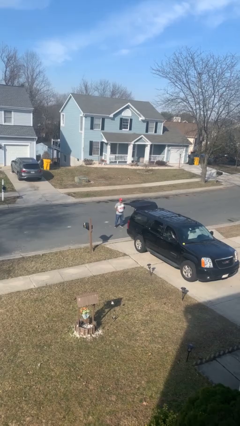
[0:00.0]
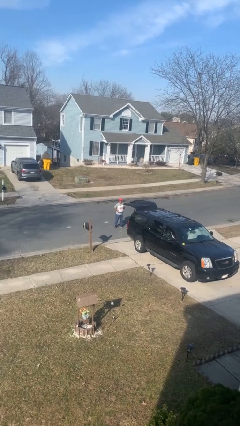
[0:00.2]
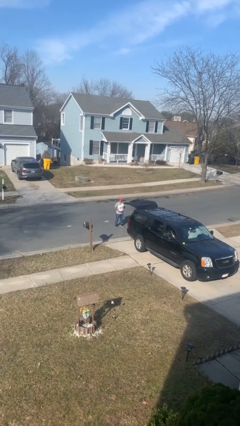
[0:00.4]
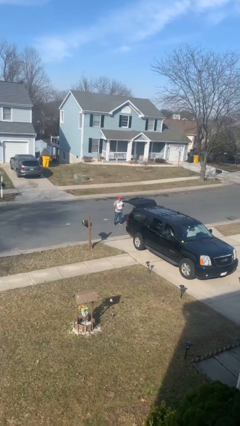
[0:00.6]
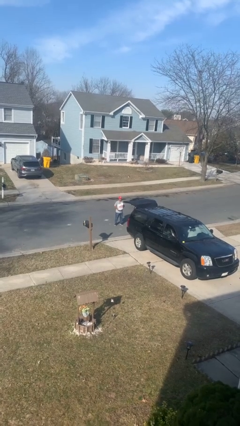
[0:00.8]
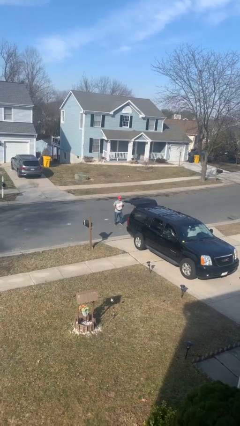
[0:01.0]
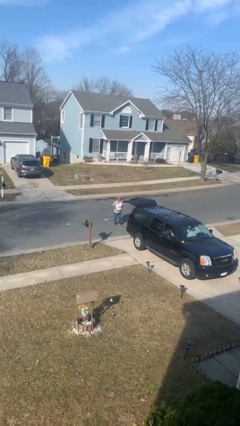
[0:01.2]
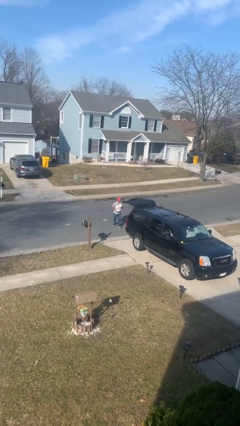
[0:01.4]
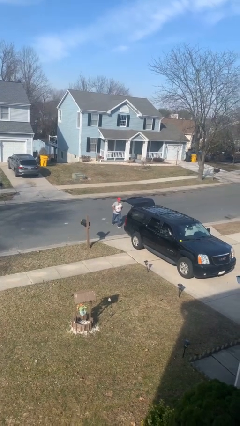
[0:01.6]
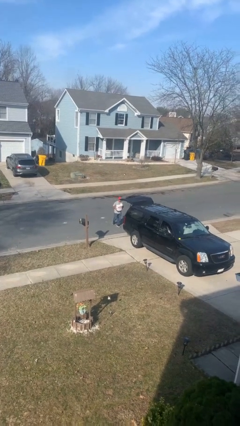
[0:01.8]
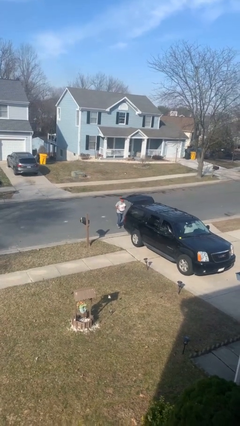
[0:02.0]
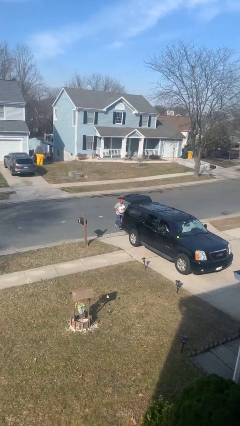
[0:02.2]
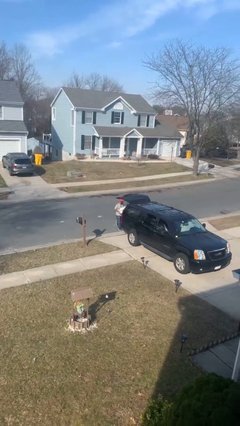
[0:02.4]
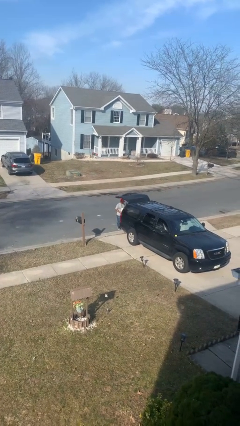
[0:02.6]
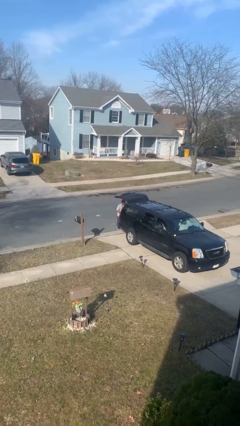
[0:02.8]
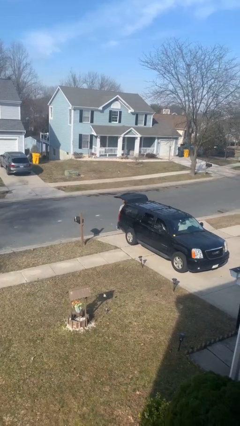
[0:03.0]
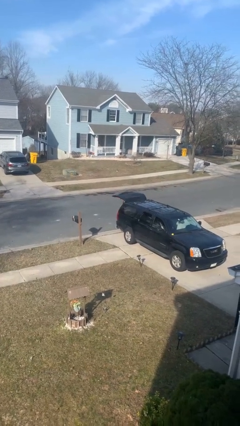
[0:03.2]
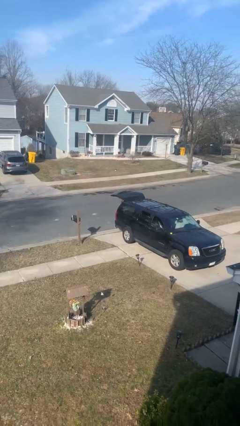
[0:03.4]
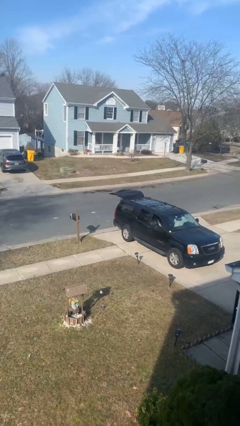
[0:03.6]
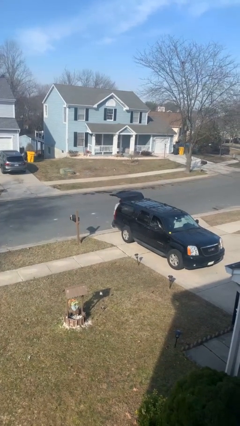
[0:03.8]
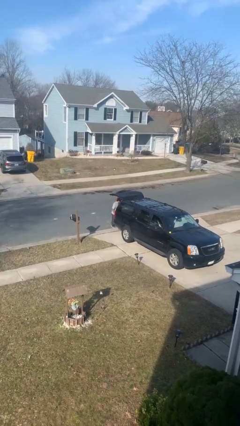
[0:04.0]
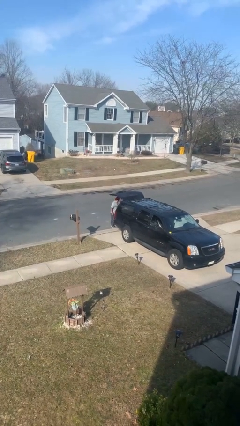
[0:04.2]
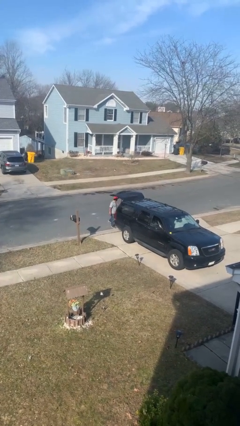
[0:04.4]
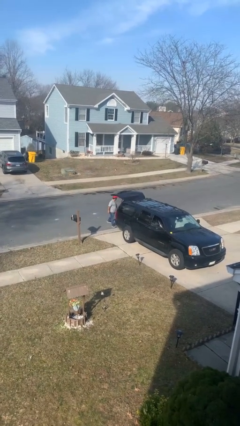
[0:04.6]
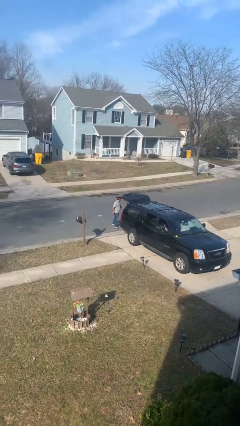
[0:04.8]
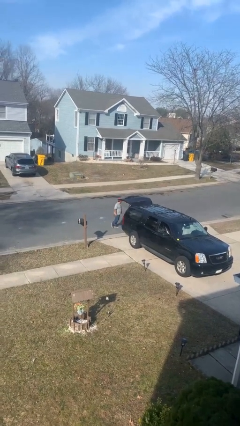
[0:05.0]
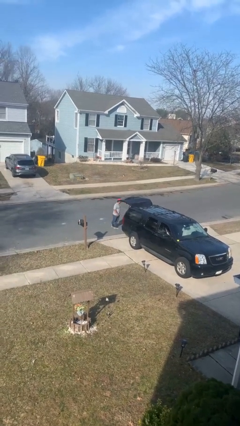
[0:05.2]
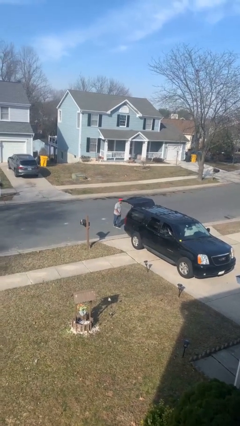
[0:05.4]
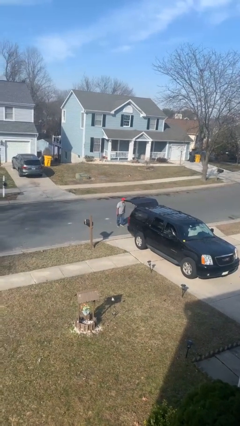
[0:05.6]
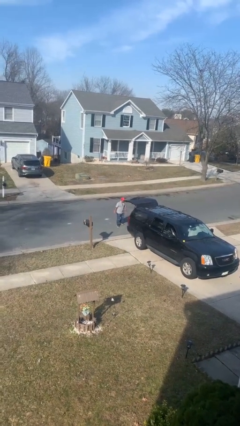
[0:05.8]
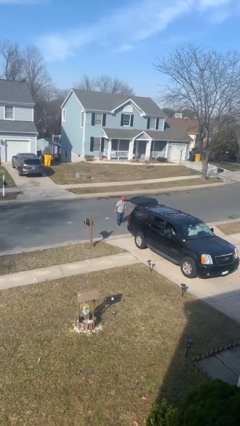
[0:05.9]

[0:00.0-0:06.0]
person loads car

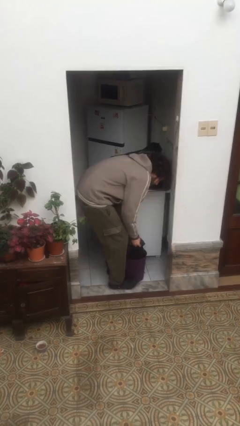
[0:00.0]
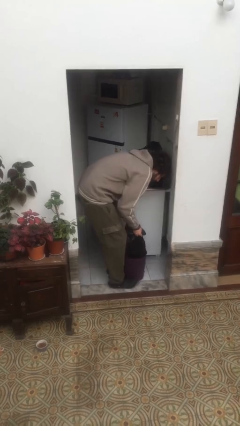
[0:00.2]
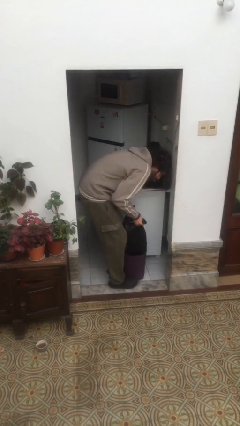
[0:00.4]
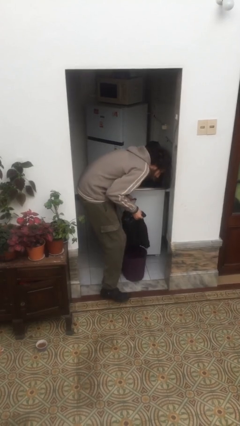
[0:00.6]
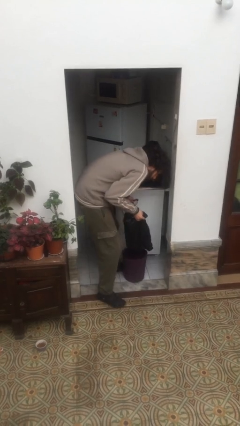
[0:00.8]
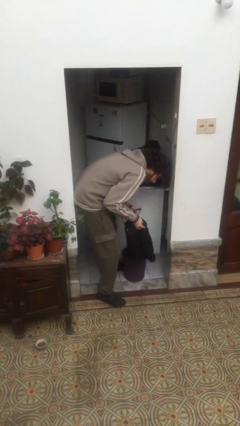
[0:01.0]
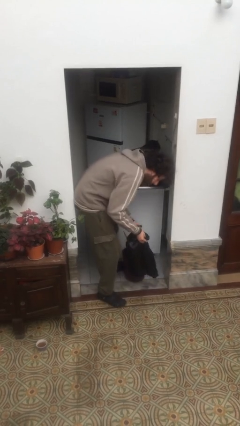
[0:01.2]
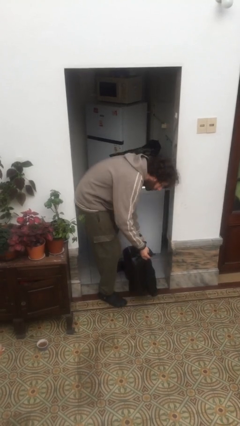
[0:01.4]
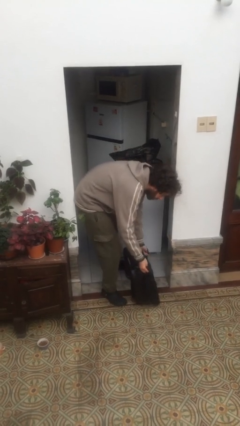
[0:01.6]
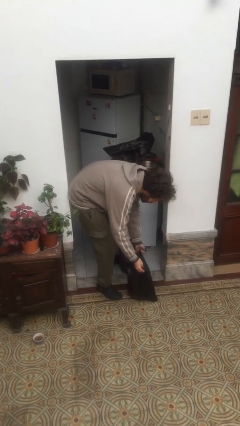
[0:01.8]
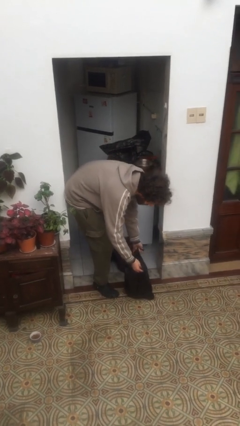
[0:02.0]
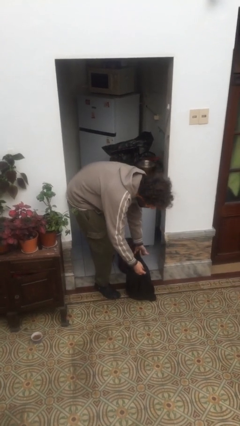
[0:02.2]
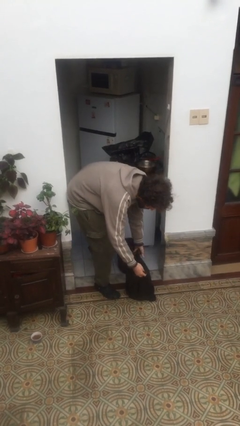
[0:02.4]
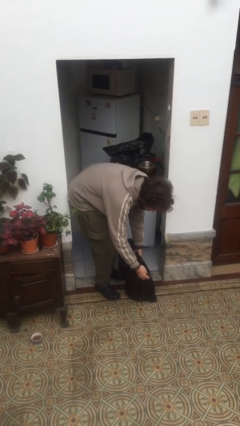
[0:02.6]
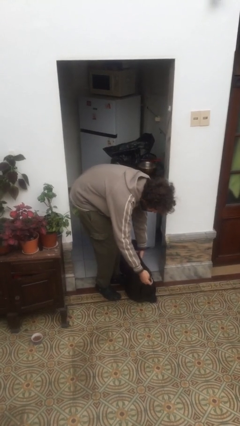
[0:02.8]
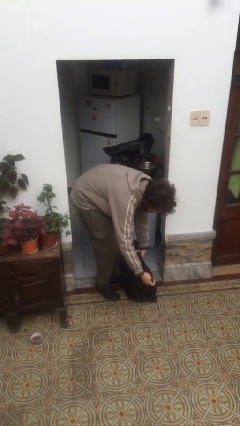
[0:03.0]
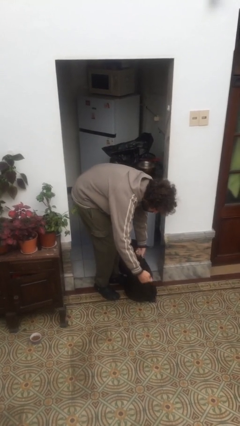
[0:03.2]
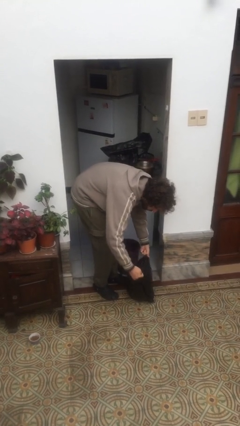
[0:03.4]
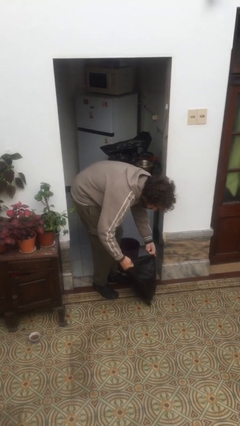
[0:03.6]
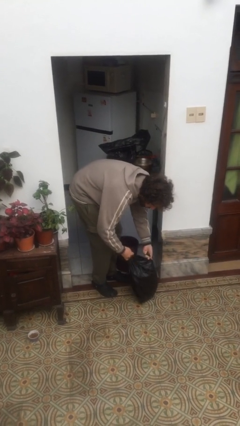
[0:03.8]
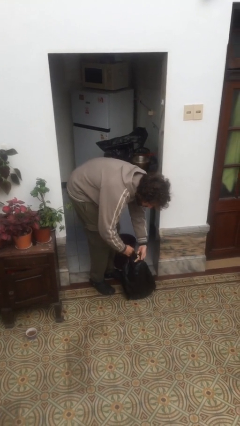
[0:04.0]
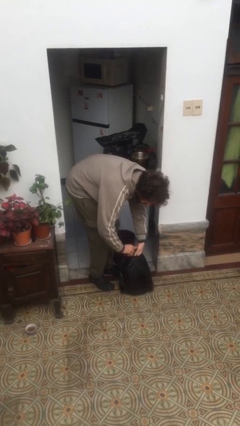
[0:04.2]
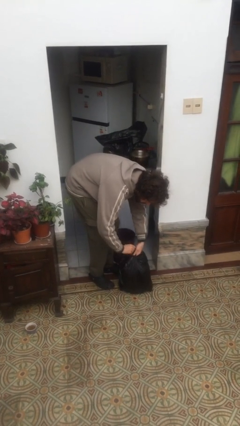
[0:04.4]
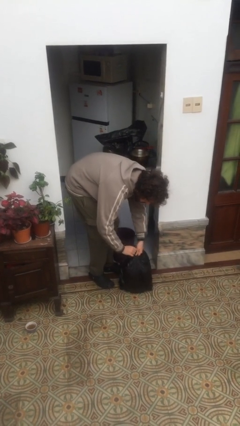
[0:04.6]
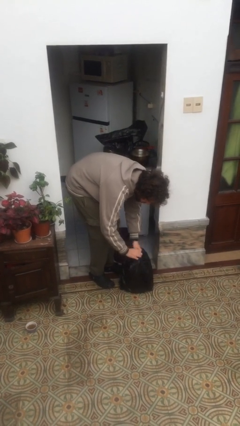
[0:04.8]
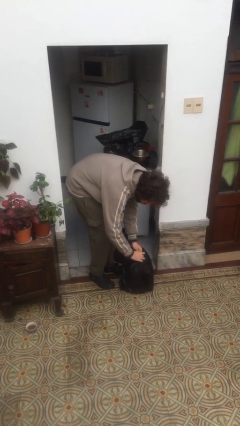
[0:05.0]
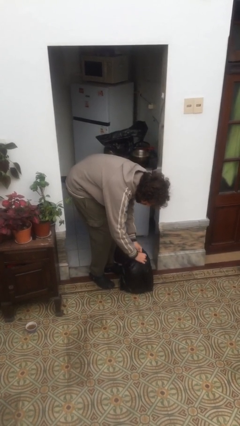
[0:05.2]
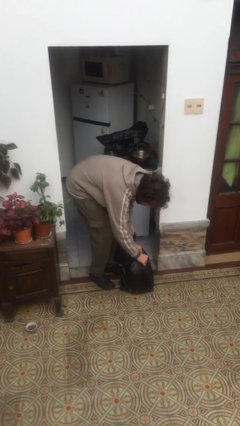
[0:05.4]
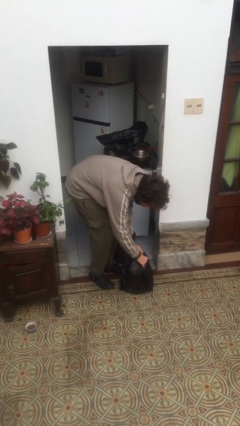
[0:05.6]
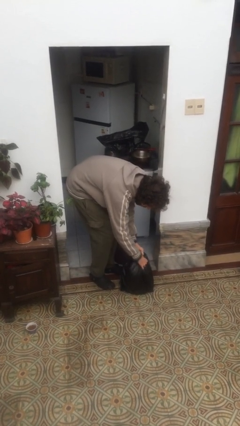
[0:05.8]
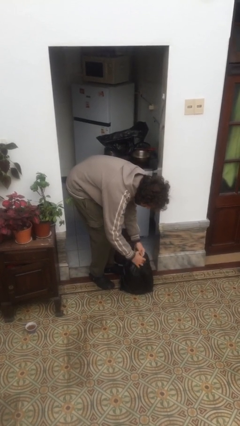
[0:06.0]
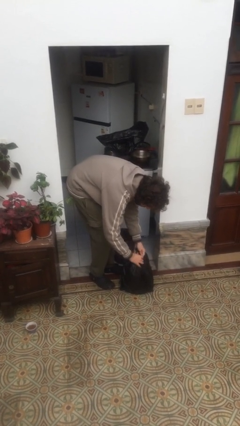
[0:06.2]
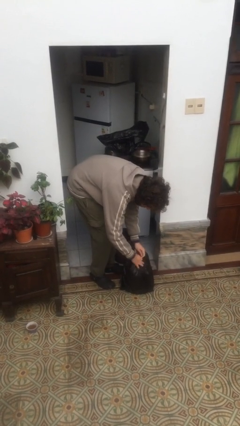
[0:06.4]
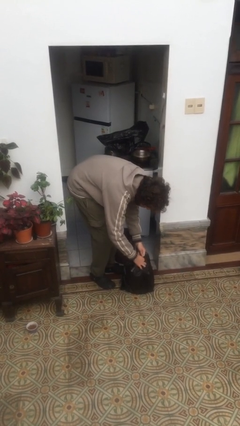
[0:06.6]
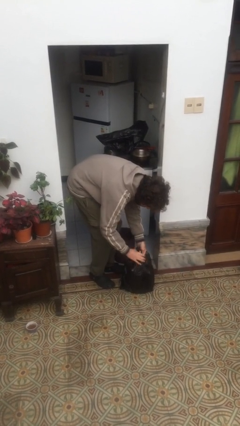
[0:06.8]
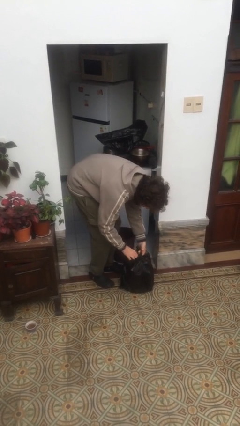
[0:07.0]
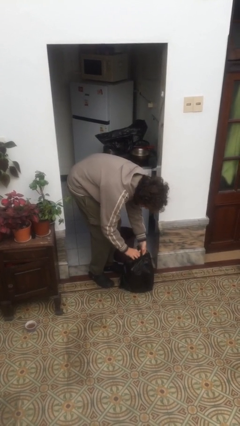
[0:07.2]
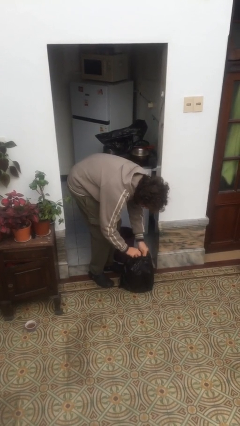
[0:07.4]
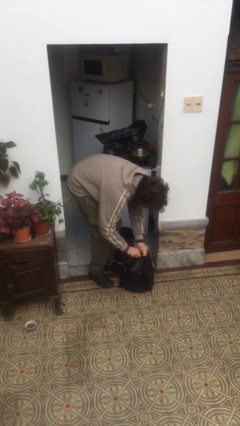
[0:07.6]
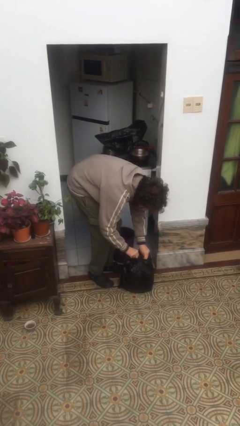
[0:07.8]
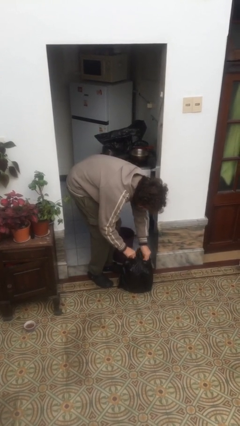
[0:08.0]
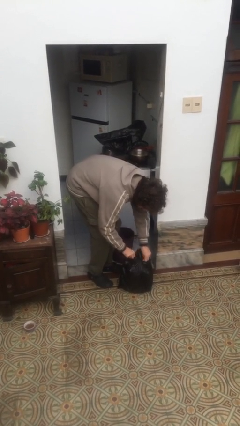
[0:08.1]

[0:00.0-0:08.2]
person removes trashbag from trashcan

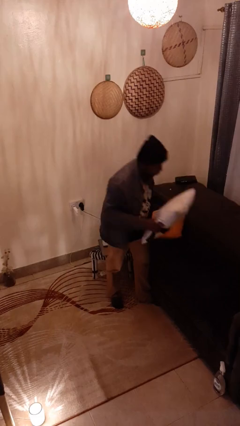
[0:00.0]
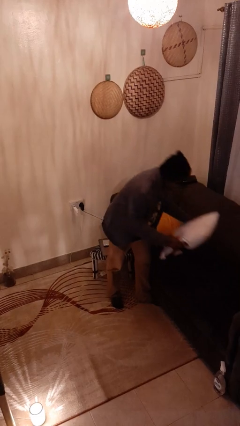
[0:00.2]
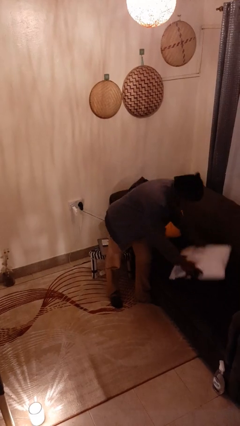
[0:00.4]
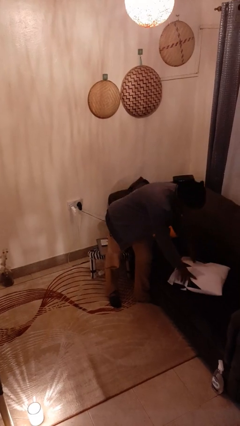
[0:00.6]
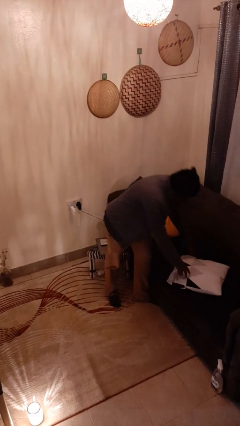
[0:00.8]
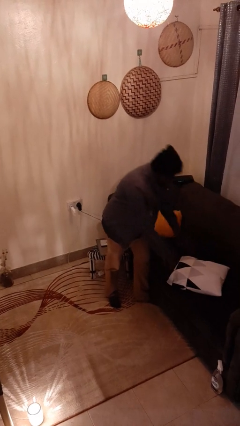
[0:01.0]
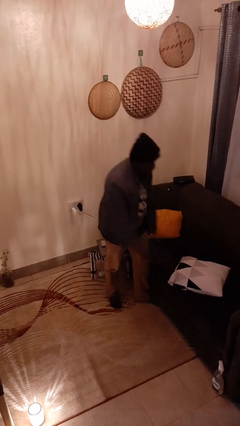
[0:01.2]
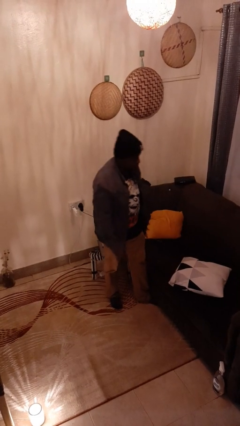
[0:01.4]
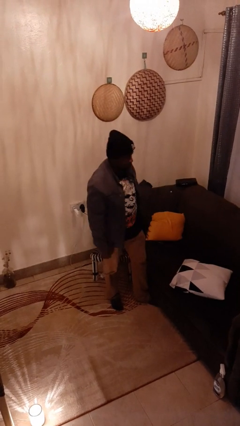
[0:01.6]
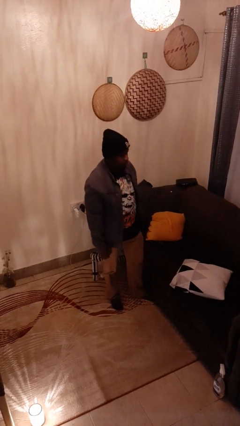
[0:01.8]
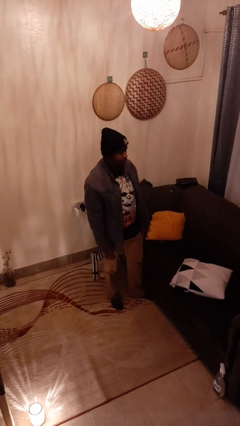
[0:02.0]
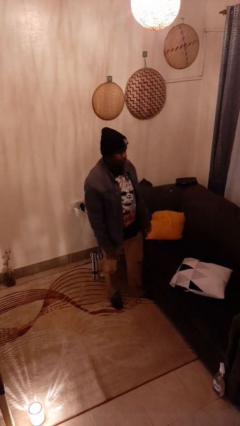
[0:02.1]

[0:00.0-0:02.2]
person puts down object on couch

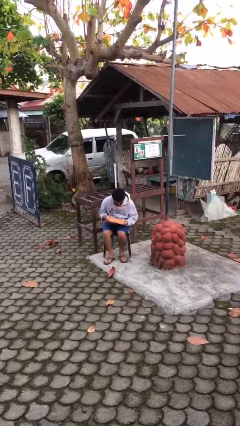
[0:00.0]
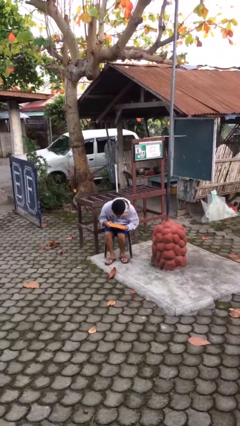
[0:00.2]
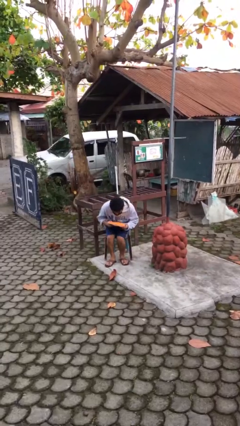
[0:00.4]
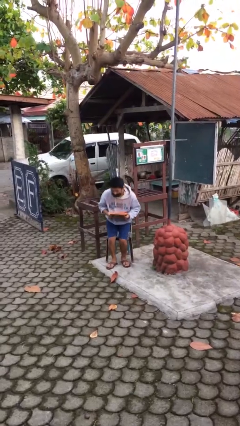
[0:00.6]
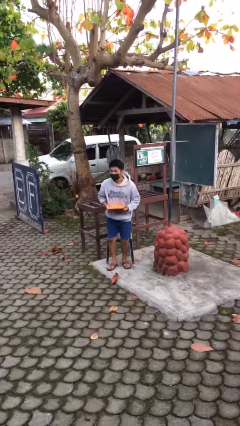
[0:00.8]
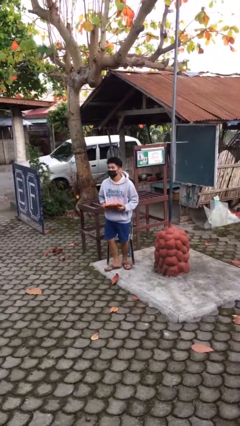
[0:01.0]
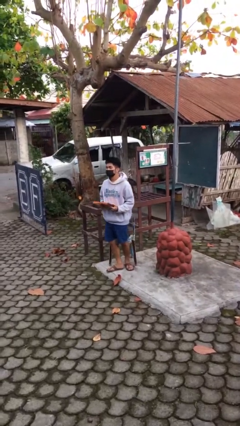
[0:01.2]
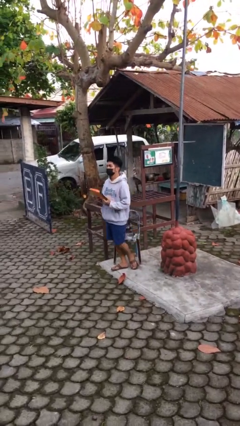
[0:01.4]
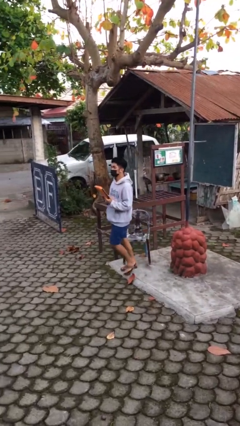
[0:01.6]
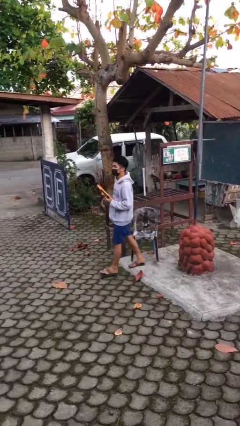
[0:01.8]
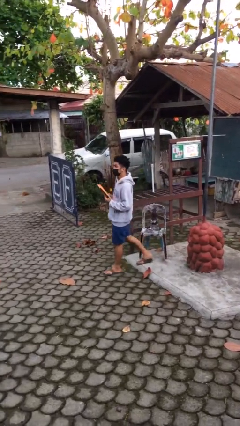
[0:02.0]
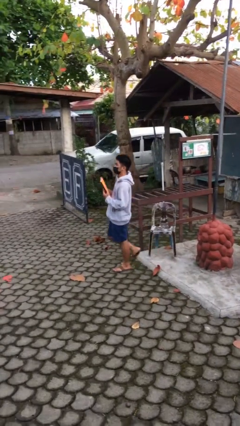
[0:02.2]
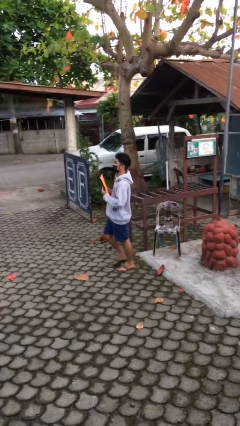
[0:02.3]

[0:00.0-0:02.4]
person stands up
